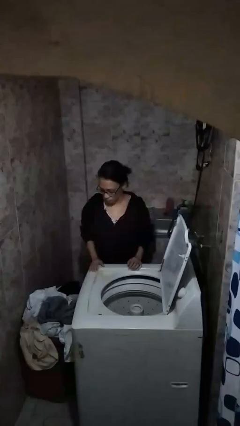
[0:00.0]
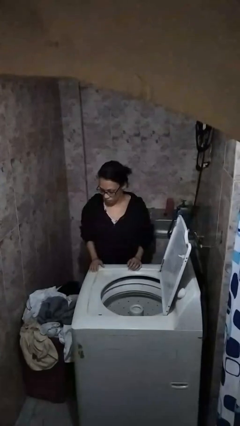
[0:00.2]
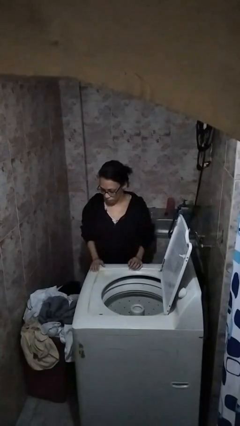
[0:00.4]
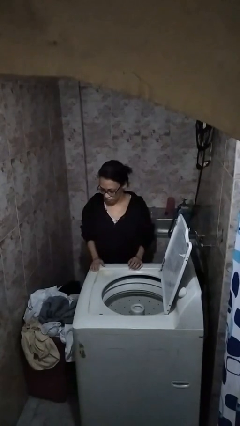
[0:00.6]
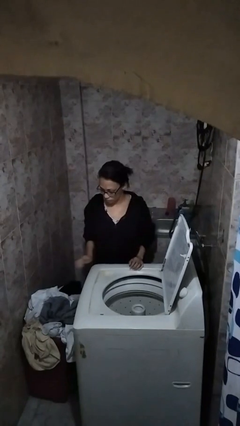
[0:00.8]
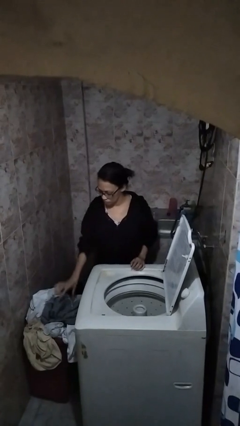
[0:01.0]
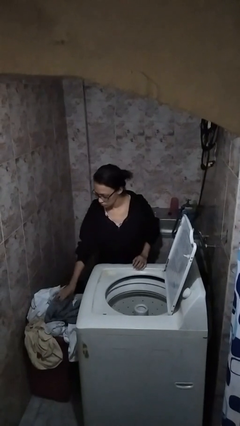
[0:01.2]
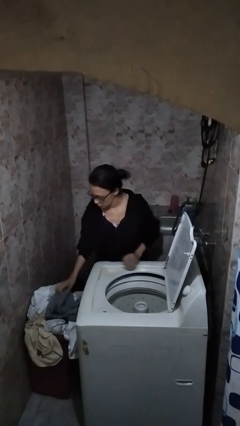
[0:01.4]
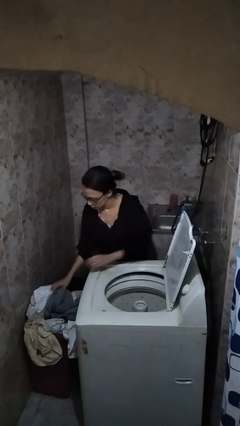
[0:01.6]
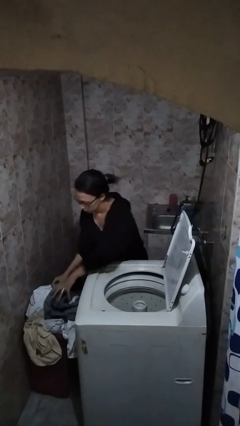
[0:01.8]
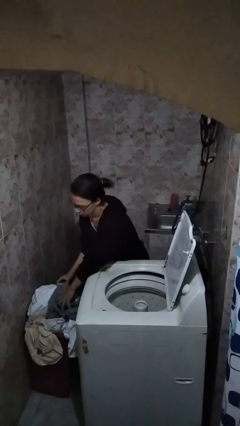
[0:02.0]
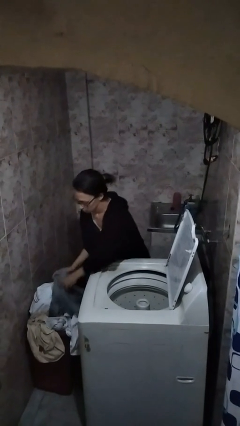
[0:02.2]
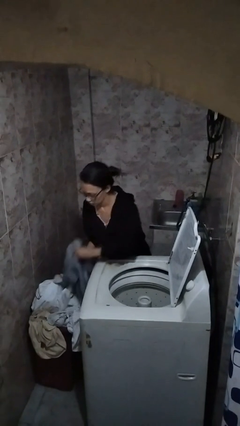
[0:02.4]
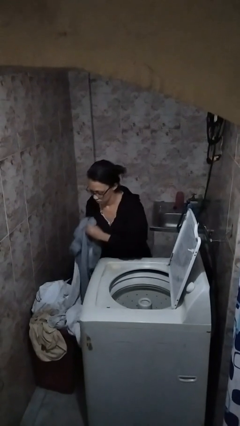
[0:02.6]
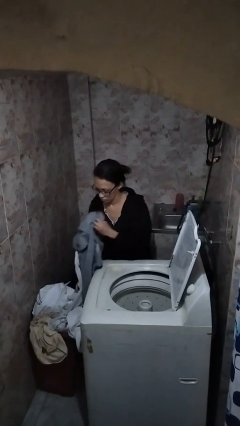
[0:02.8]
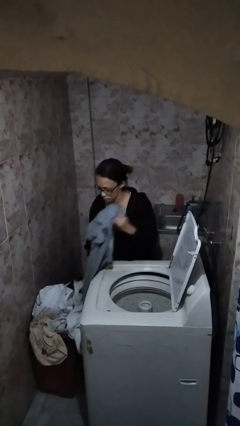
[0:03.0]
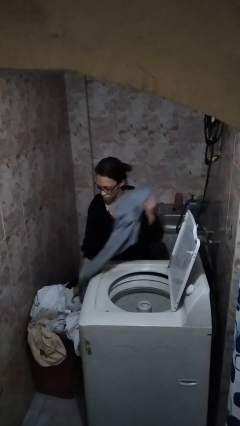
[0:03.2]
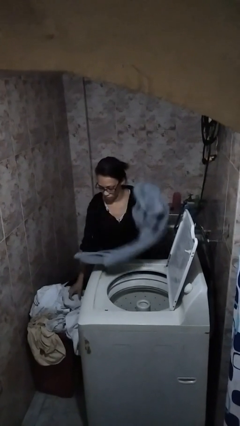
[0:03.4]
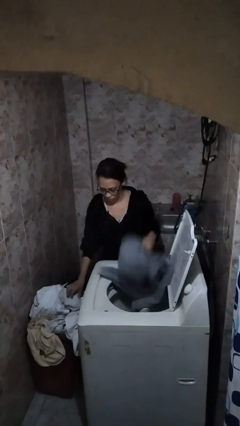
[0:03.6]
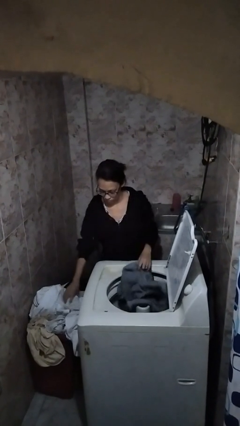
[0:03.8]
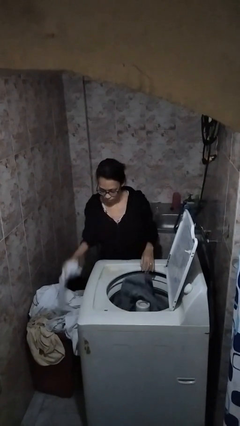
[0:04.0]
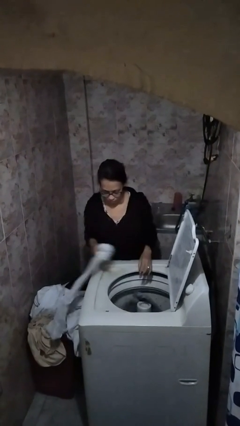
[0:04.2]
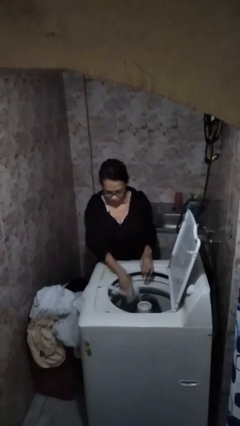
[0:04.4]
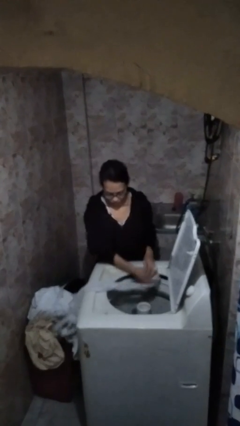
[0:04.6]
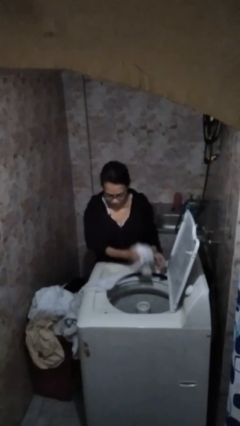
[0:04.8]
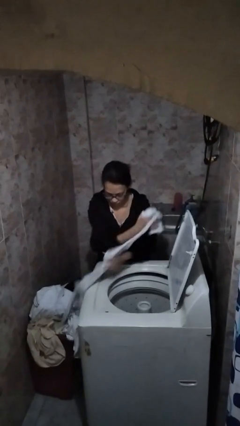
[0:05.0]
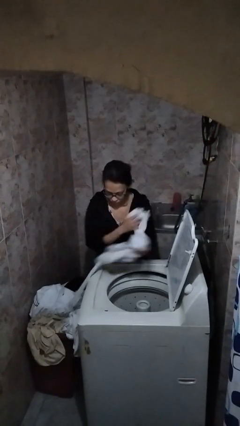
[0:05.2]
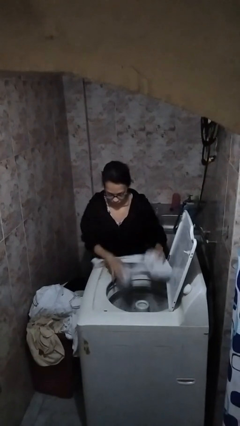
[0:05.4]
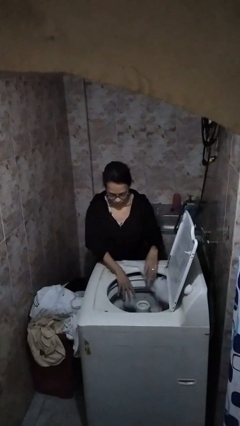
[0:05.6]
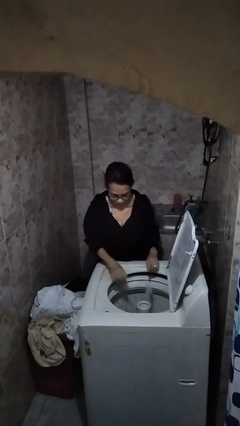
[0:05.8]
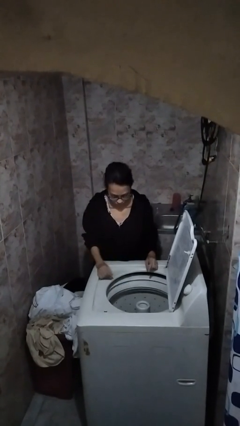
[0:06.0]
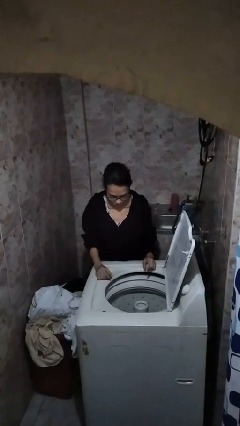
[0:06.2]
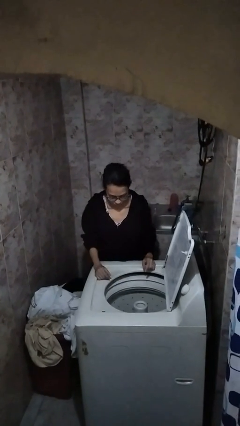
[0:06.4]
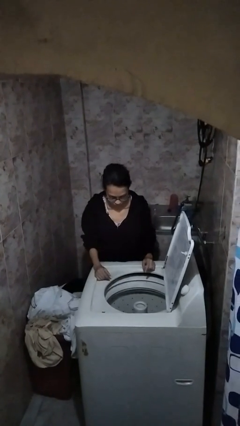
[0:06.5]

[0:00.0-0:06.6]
person loads dryer

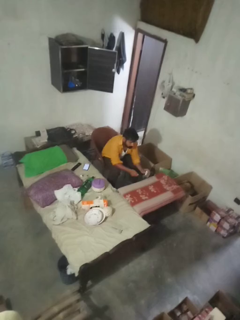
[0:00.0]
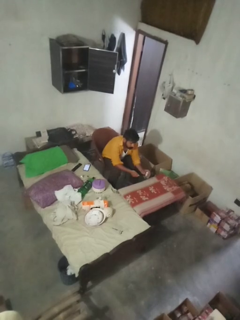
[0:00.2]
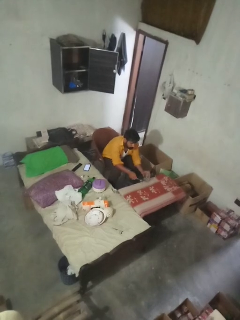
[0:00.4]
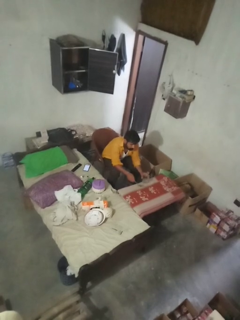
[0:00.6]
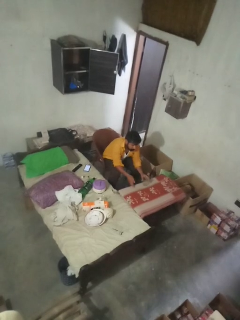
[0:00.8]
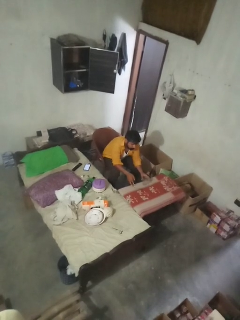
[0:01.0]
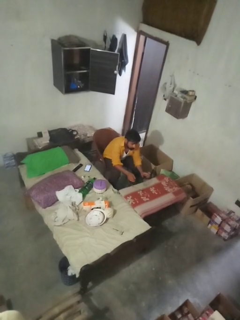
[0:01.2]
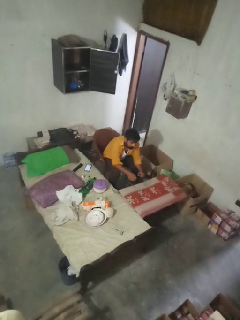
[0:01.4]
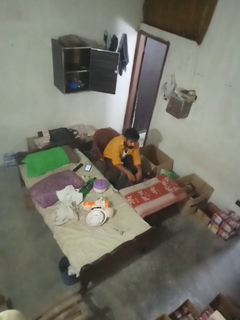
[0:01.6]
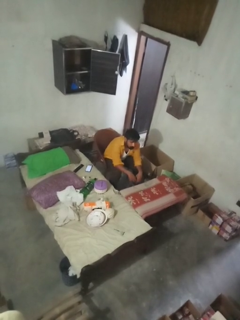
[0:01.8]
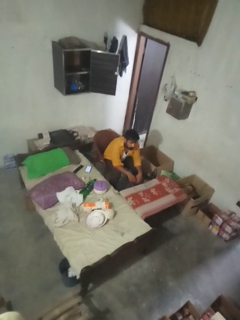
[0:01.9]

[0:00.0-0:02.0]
person sets upright glass

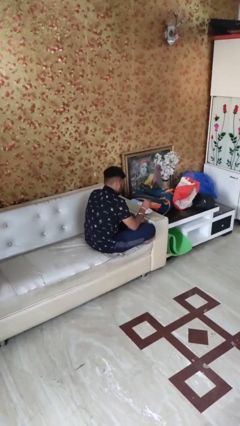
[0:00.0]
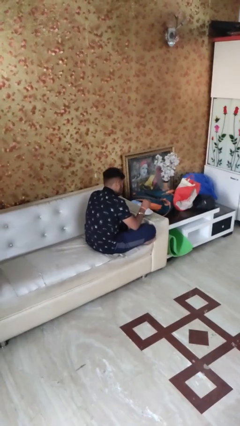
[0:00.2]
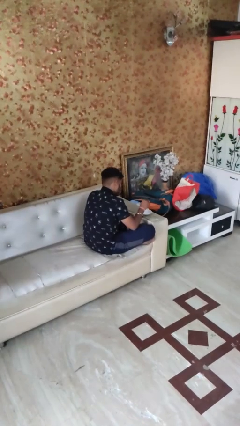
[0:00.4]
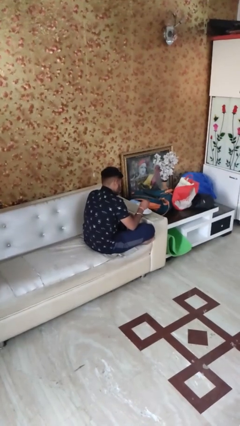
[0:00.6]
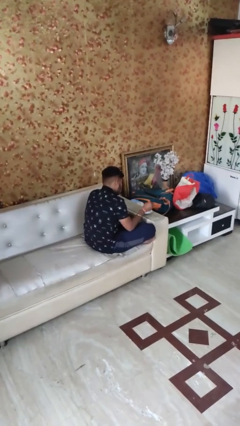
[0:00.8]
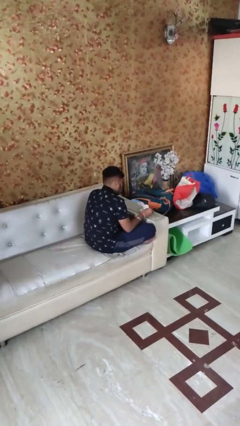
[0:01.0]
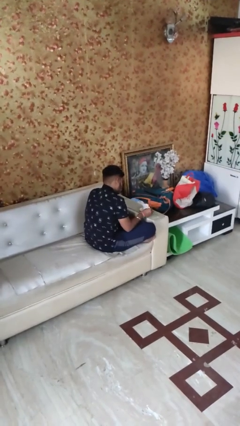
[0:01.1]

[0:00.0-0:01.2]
person stirs mug

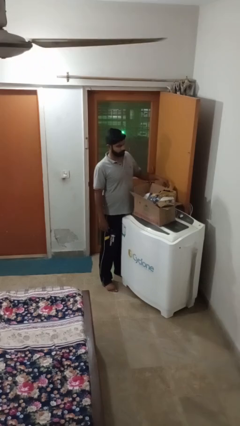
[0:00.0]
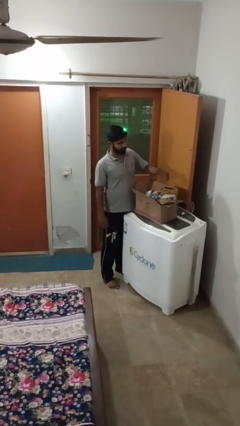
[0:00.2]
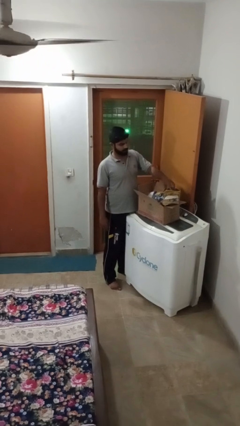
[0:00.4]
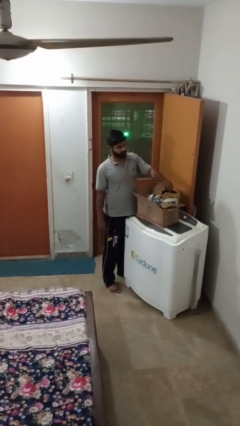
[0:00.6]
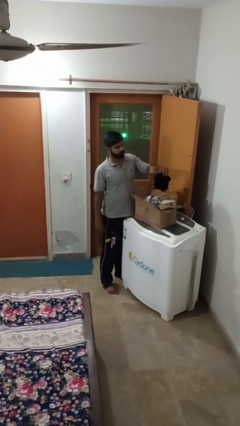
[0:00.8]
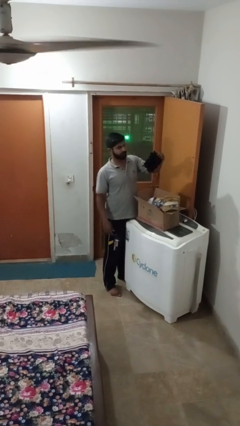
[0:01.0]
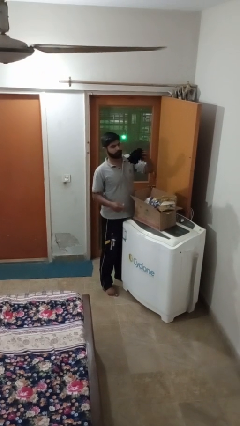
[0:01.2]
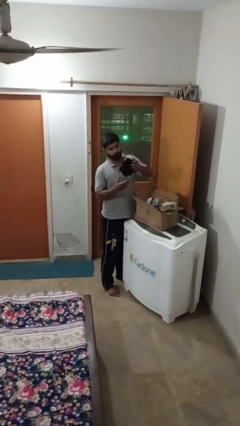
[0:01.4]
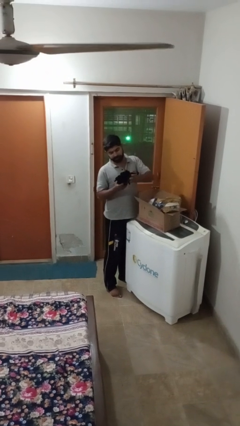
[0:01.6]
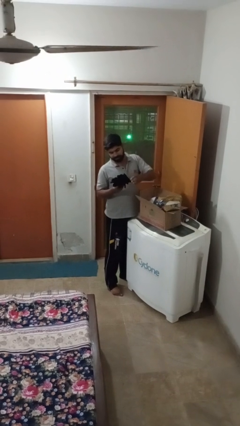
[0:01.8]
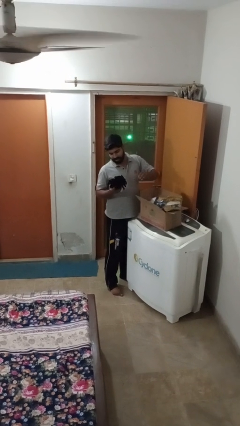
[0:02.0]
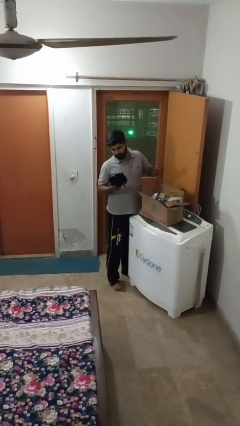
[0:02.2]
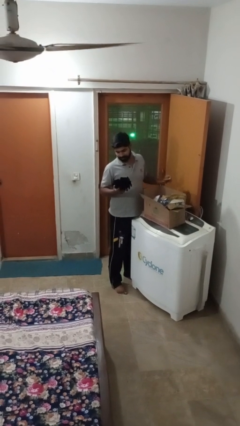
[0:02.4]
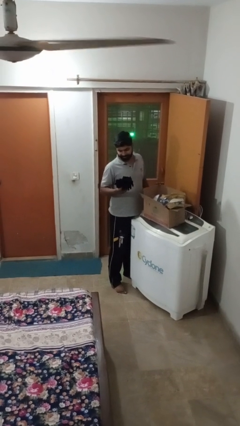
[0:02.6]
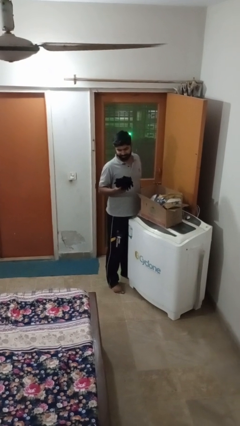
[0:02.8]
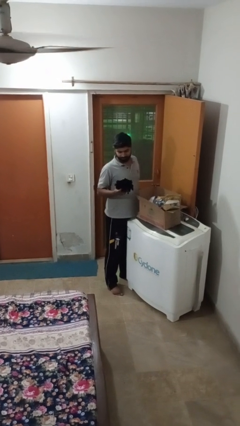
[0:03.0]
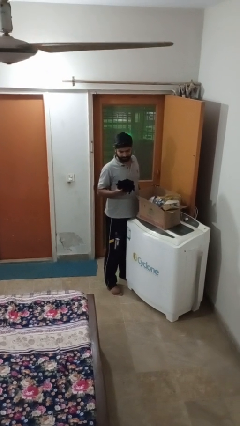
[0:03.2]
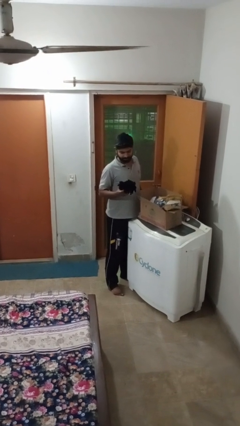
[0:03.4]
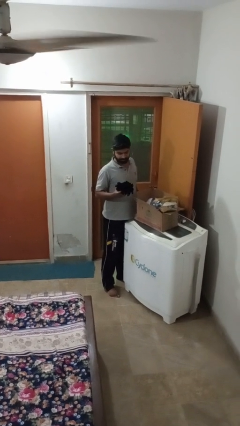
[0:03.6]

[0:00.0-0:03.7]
person takes object from box

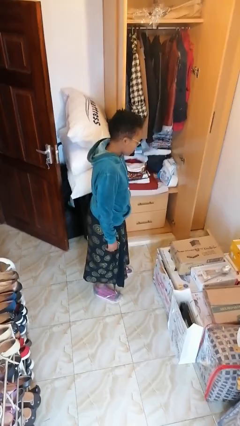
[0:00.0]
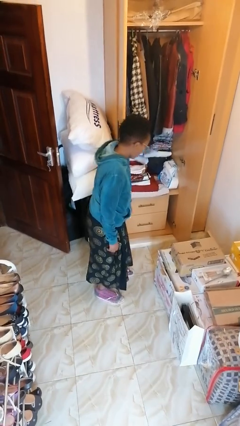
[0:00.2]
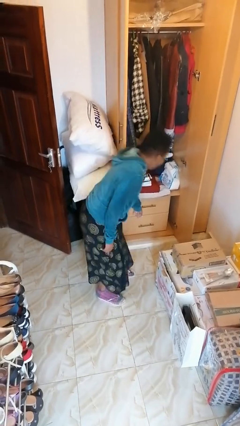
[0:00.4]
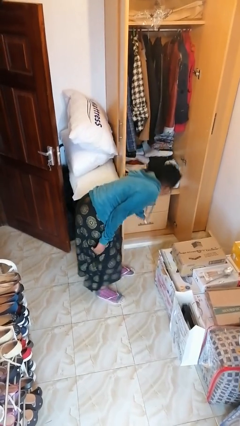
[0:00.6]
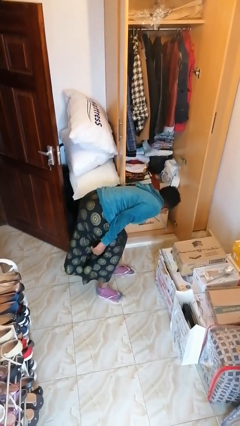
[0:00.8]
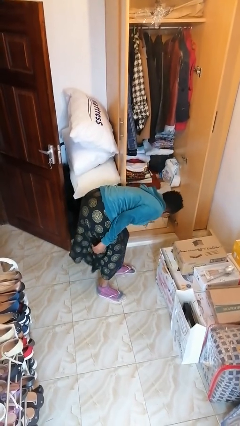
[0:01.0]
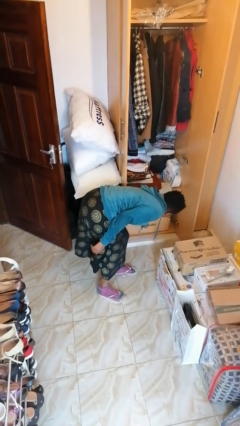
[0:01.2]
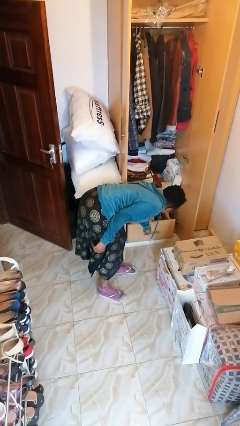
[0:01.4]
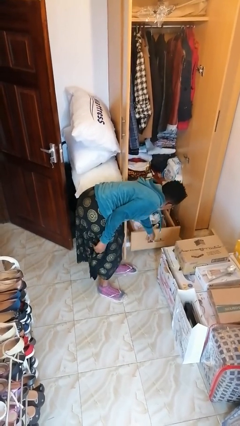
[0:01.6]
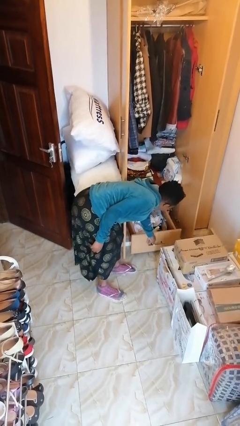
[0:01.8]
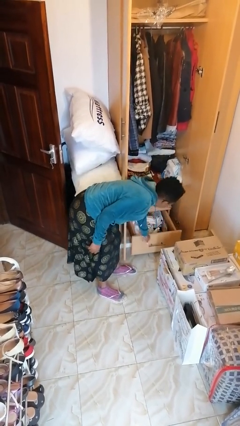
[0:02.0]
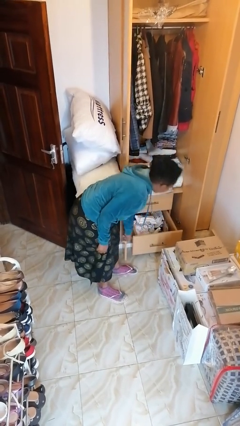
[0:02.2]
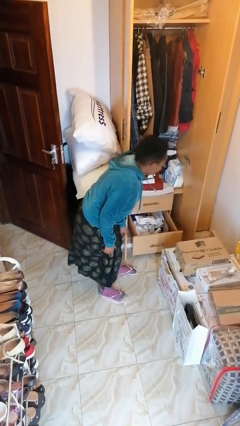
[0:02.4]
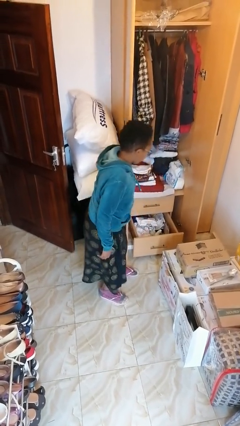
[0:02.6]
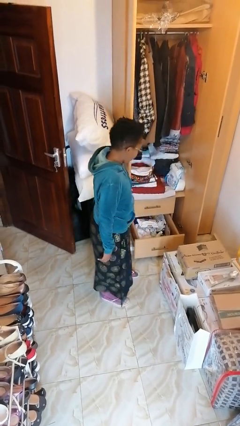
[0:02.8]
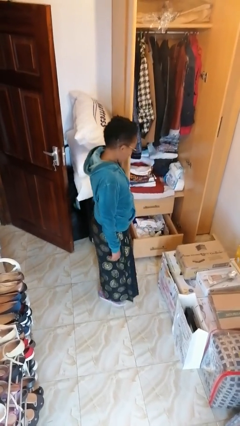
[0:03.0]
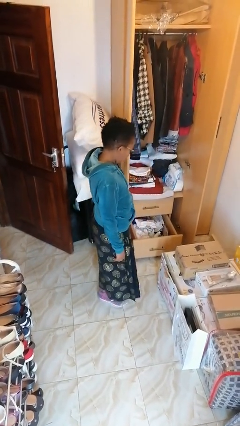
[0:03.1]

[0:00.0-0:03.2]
person opens dresser drawer

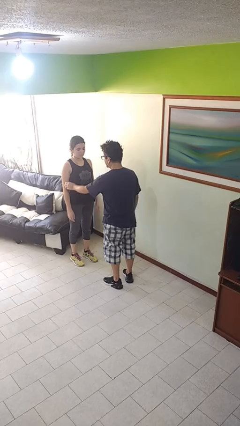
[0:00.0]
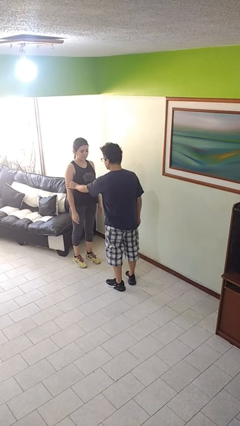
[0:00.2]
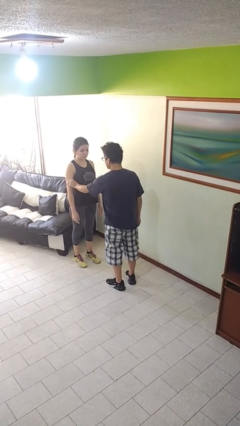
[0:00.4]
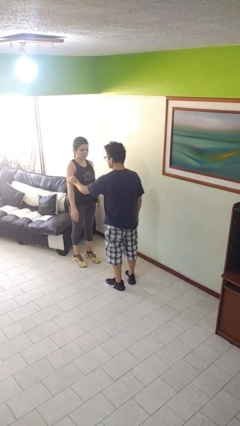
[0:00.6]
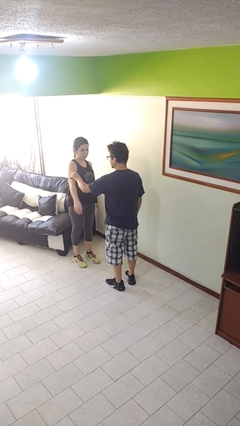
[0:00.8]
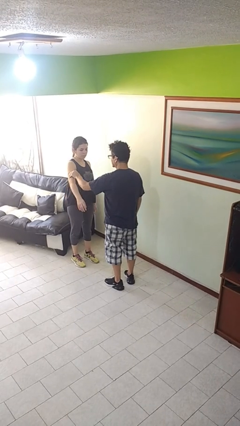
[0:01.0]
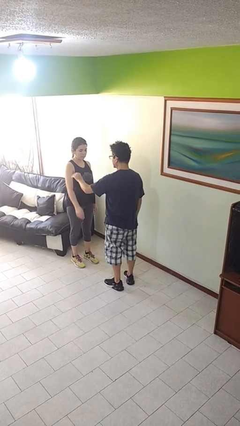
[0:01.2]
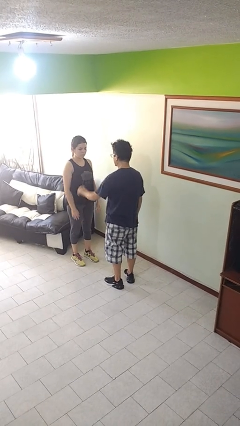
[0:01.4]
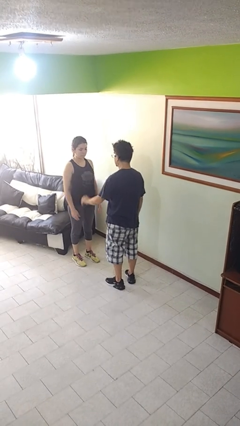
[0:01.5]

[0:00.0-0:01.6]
person grabs person by bicep
